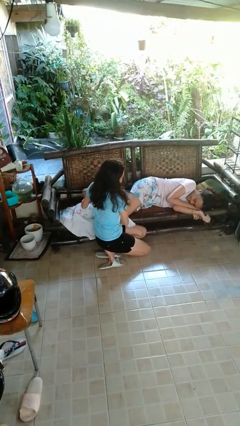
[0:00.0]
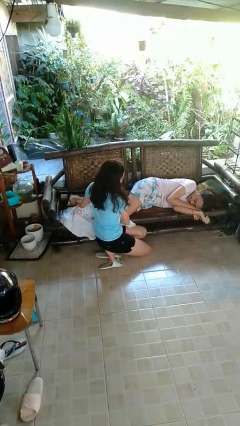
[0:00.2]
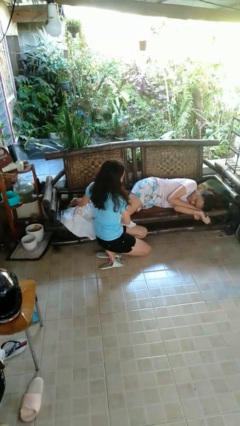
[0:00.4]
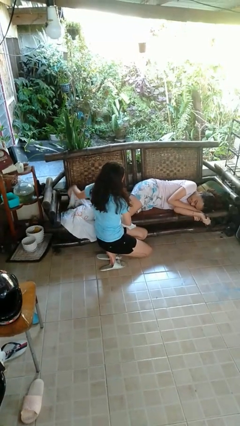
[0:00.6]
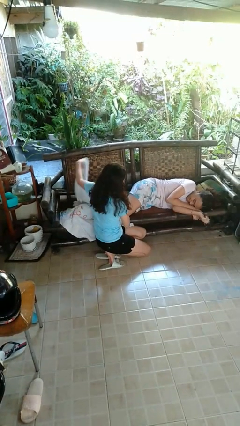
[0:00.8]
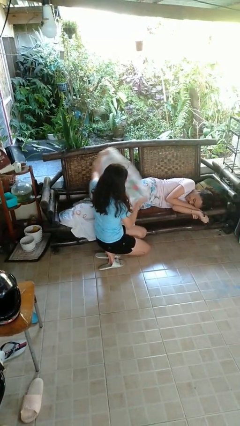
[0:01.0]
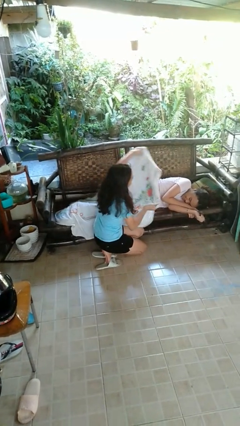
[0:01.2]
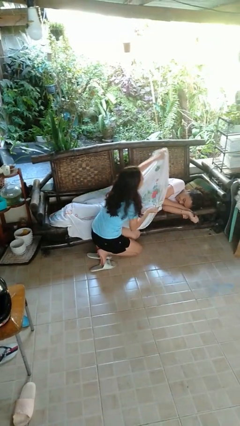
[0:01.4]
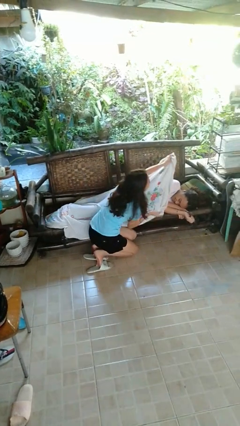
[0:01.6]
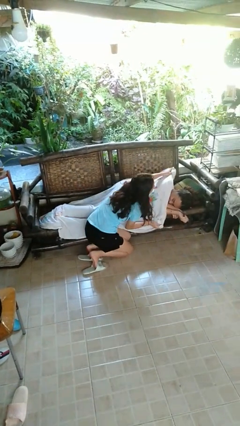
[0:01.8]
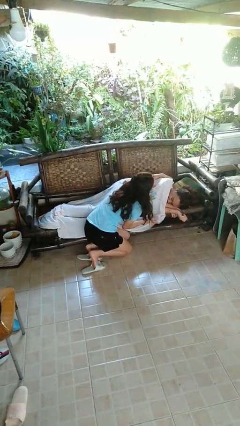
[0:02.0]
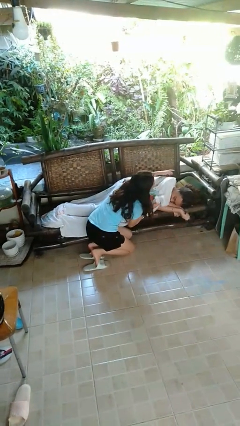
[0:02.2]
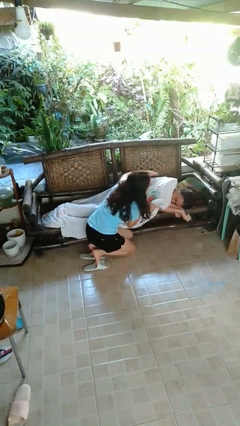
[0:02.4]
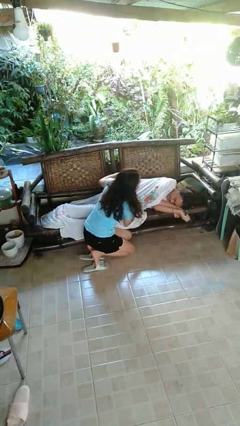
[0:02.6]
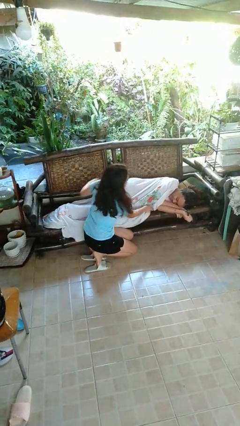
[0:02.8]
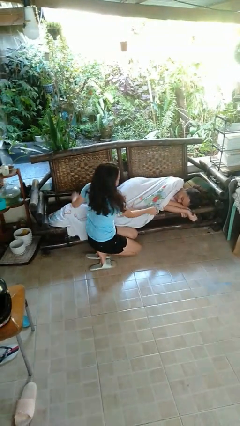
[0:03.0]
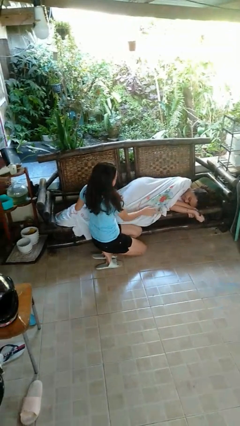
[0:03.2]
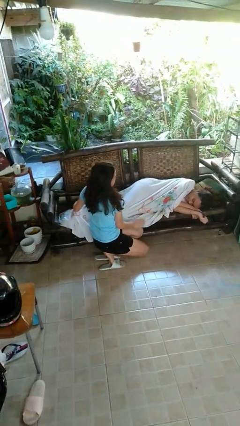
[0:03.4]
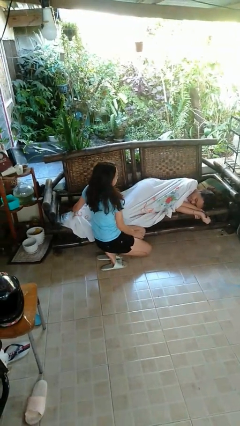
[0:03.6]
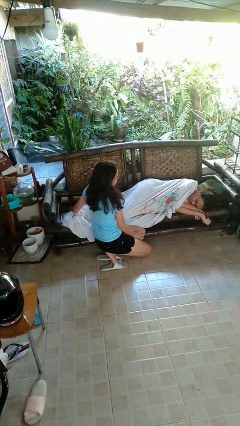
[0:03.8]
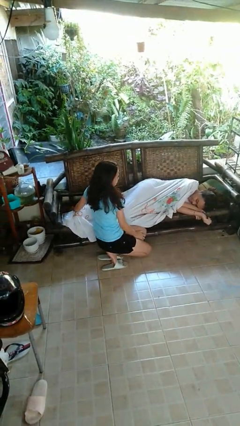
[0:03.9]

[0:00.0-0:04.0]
person covers friend with blanket

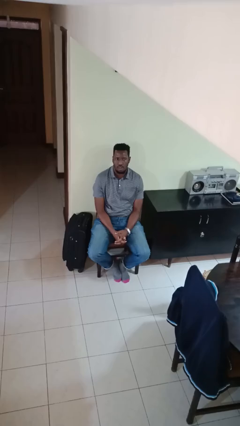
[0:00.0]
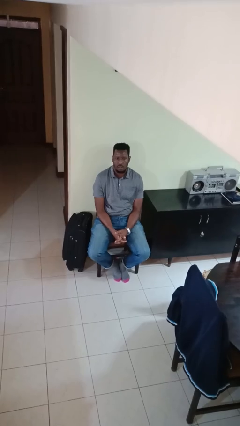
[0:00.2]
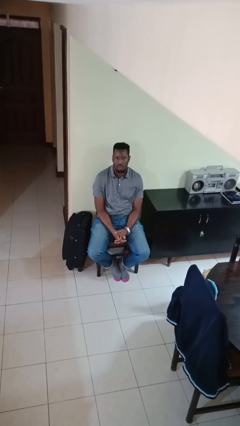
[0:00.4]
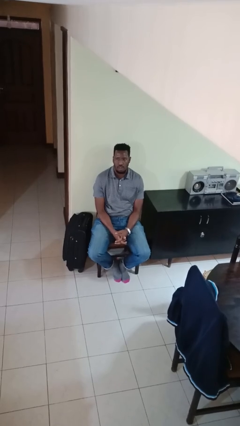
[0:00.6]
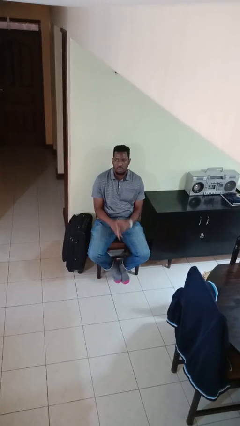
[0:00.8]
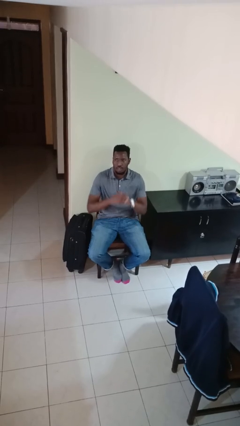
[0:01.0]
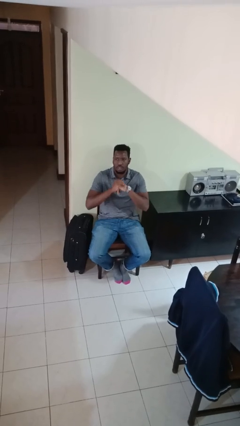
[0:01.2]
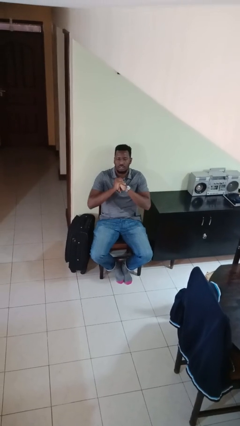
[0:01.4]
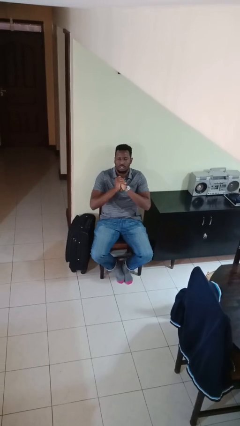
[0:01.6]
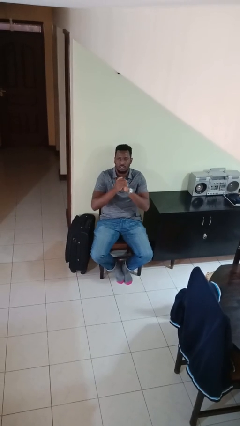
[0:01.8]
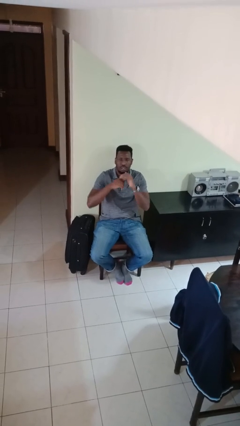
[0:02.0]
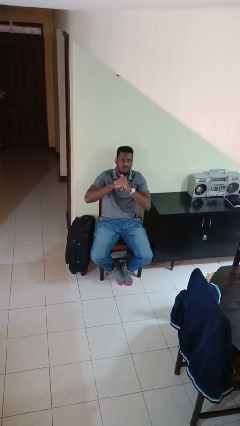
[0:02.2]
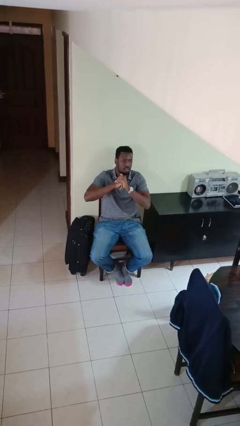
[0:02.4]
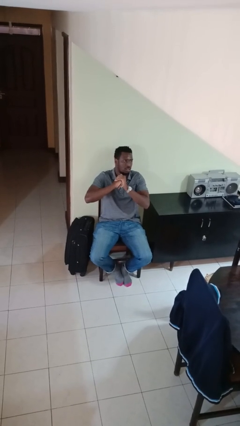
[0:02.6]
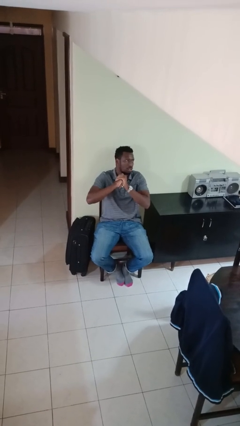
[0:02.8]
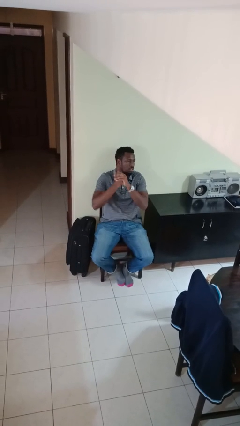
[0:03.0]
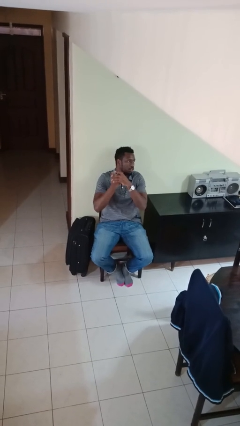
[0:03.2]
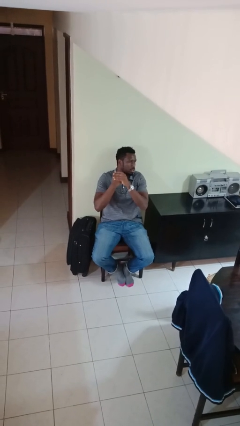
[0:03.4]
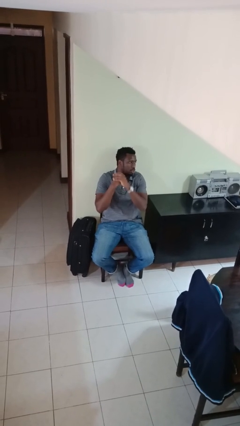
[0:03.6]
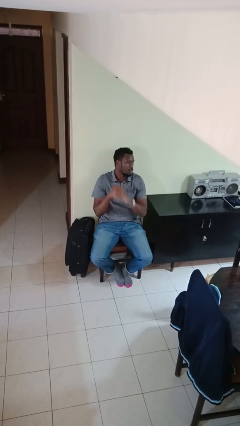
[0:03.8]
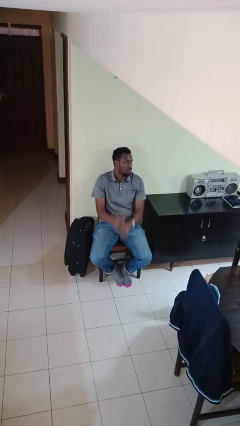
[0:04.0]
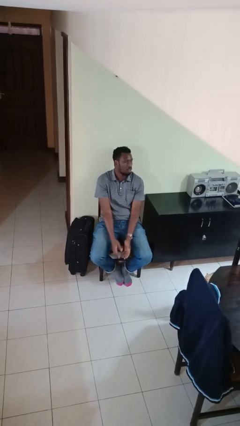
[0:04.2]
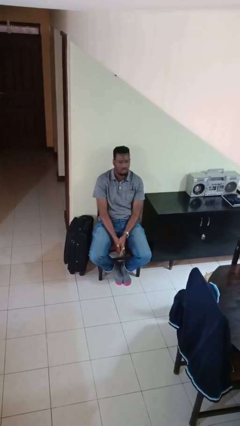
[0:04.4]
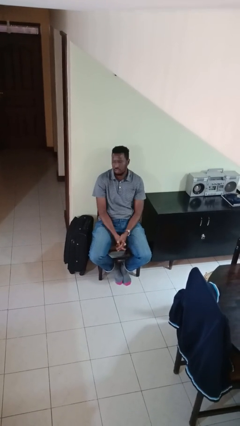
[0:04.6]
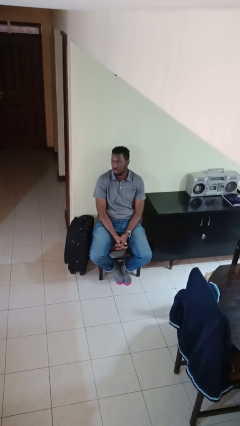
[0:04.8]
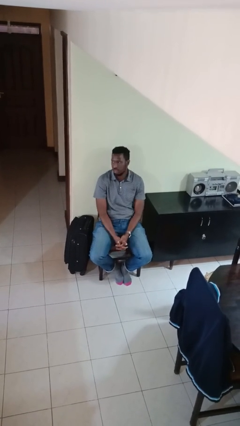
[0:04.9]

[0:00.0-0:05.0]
person cracks knuckles

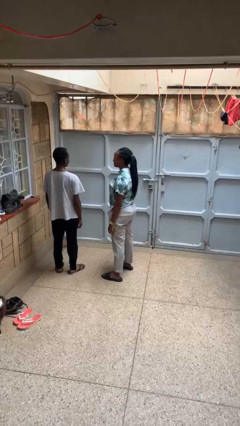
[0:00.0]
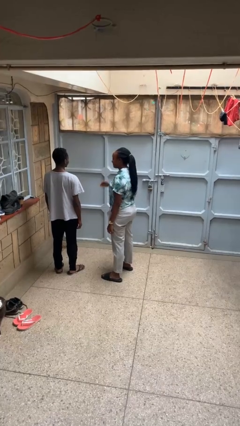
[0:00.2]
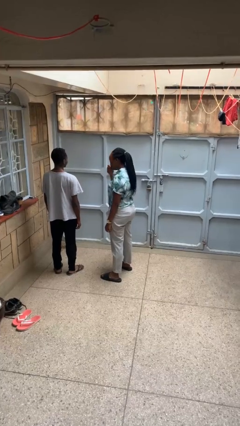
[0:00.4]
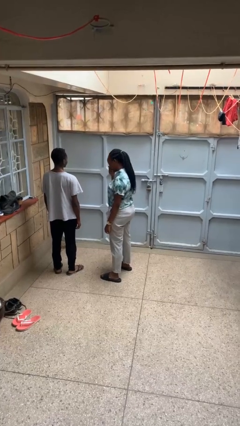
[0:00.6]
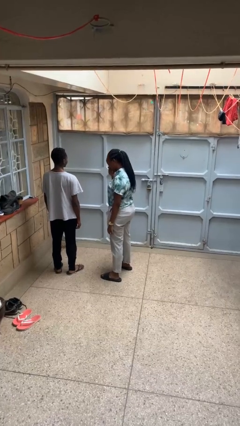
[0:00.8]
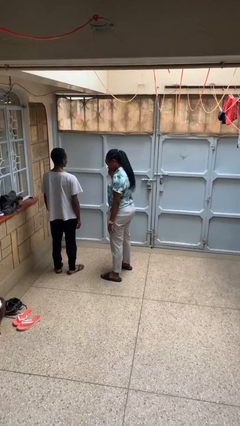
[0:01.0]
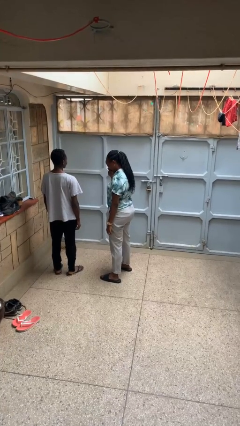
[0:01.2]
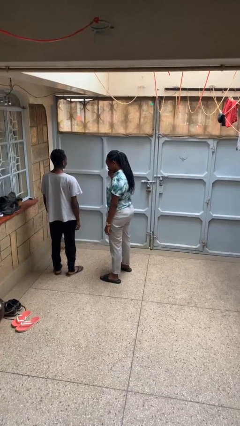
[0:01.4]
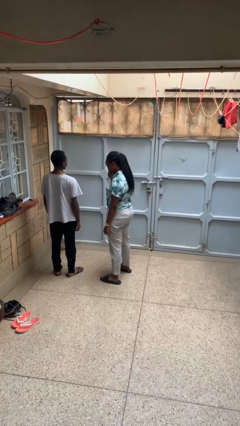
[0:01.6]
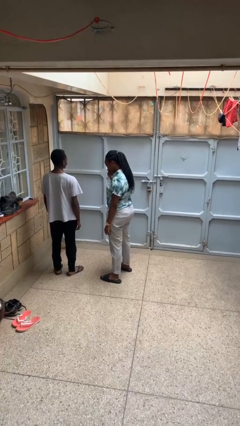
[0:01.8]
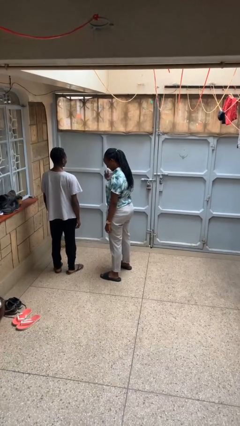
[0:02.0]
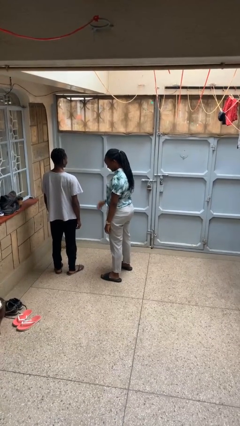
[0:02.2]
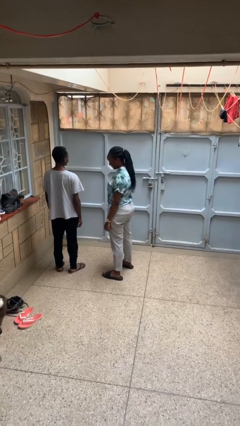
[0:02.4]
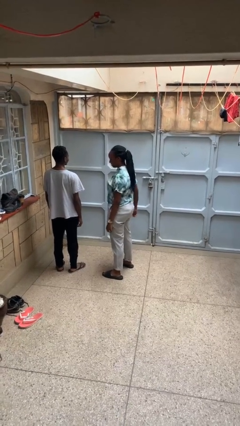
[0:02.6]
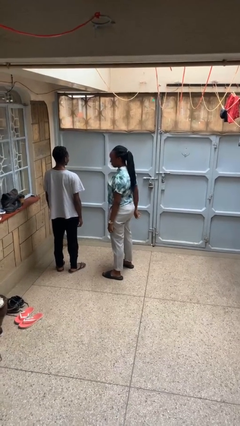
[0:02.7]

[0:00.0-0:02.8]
person laughs with person

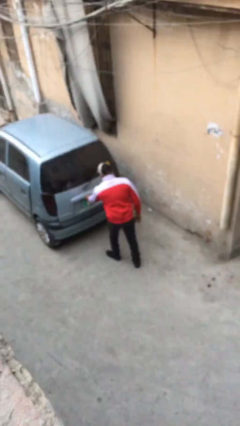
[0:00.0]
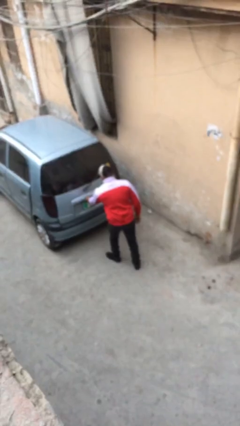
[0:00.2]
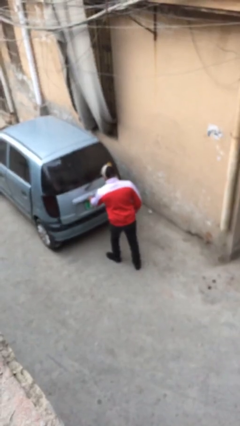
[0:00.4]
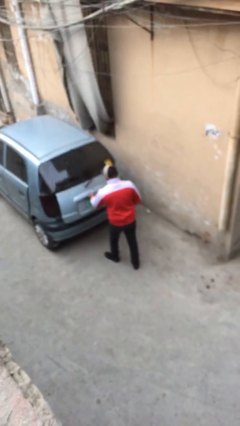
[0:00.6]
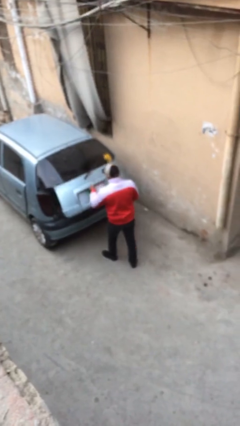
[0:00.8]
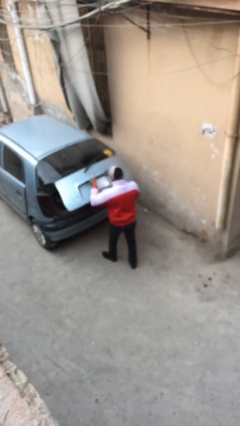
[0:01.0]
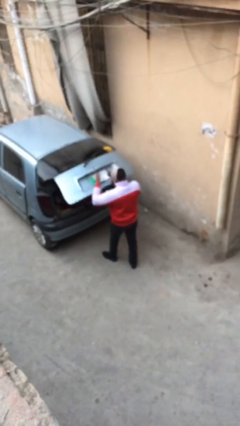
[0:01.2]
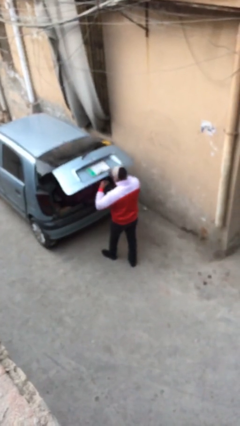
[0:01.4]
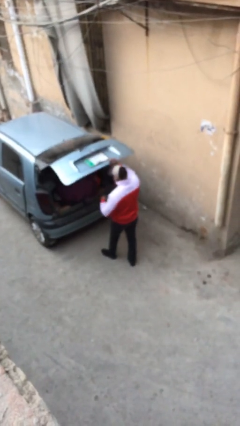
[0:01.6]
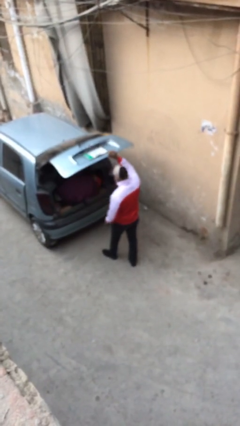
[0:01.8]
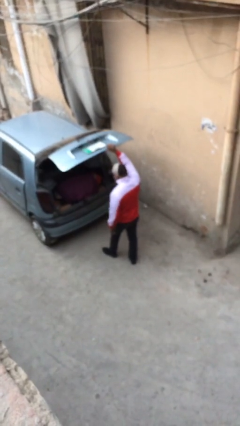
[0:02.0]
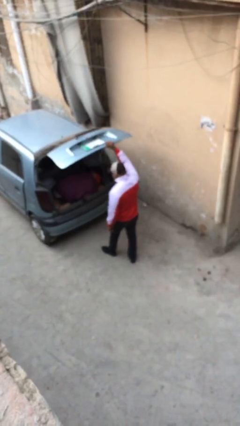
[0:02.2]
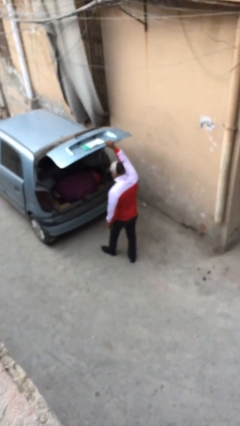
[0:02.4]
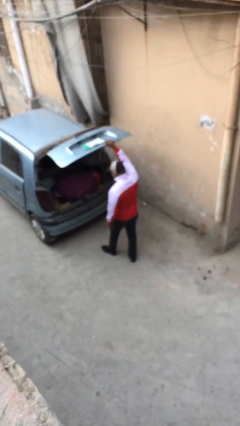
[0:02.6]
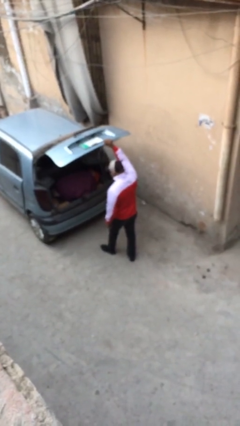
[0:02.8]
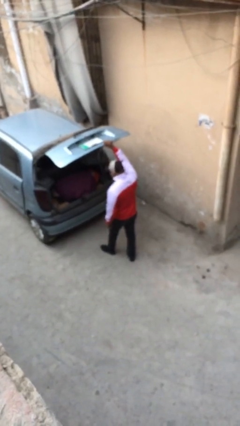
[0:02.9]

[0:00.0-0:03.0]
person opens car trunk

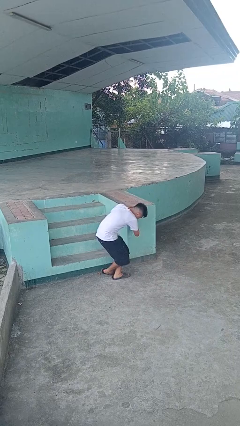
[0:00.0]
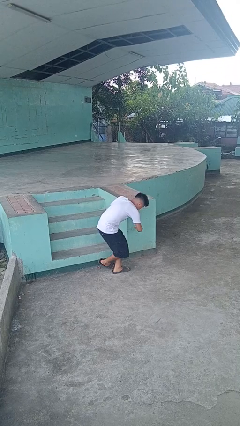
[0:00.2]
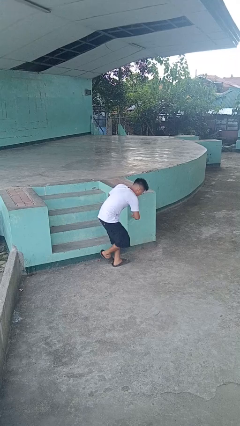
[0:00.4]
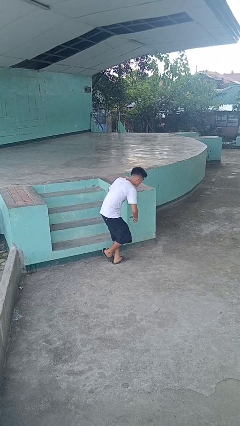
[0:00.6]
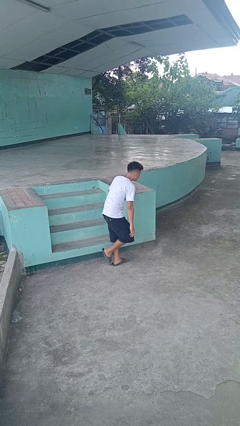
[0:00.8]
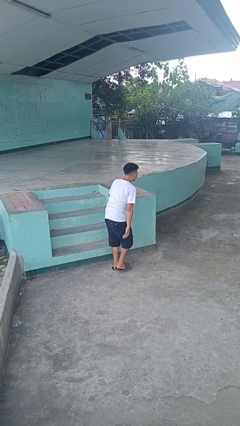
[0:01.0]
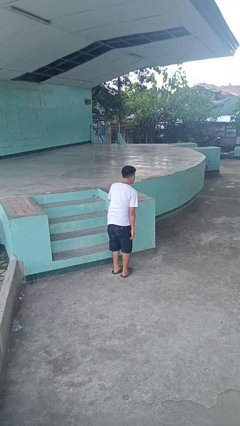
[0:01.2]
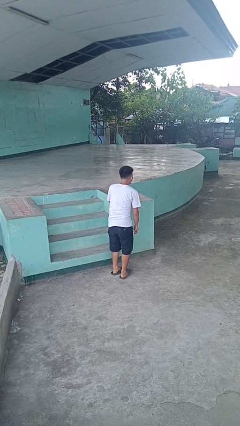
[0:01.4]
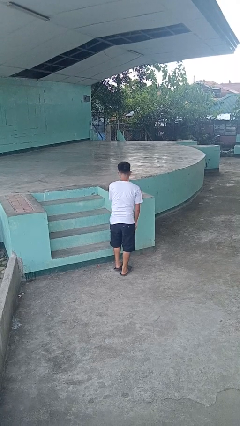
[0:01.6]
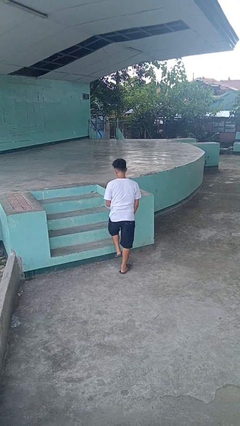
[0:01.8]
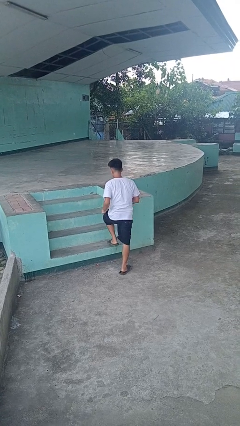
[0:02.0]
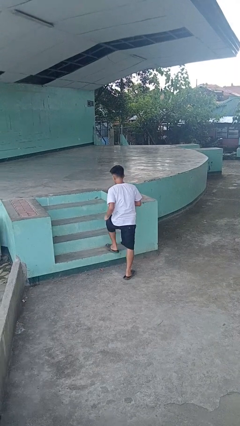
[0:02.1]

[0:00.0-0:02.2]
person trips on stair

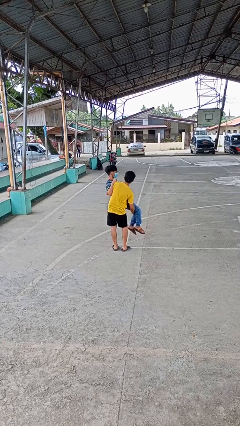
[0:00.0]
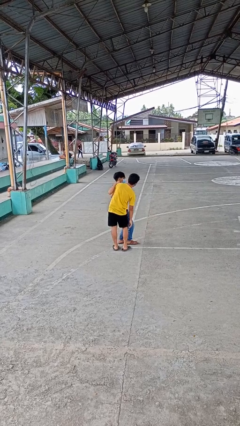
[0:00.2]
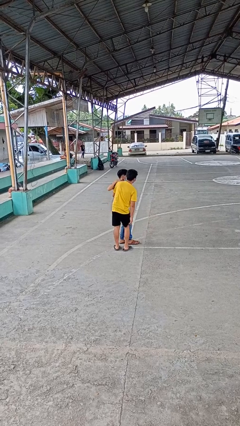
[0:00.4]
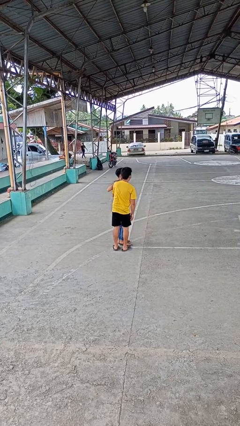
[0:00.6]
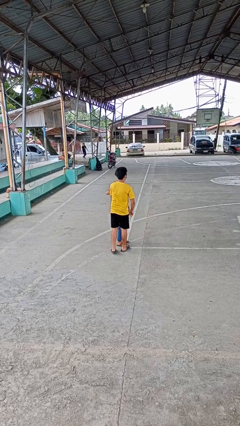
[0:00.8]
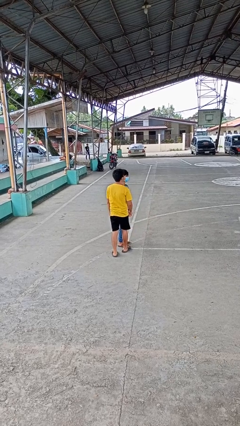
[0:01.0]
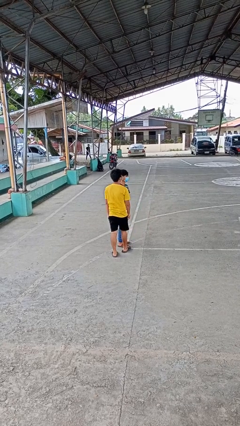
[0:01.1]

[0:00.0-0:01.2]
person puts down person
